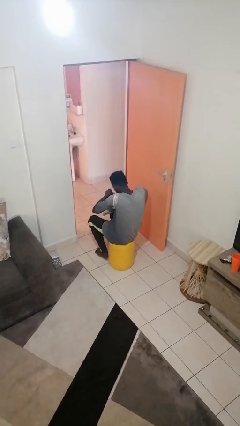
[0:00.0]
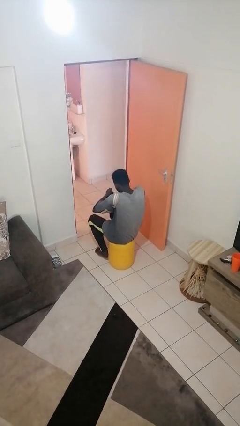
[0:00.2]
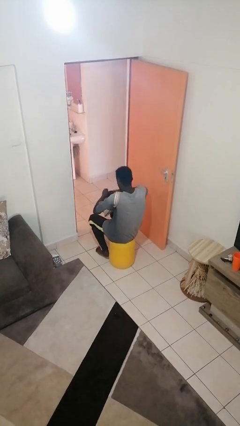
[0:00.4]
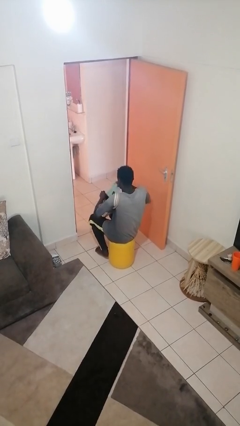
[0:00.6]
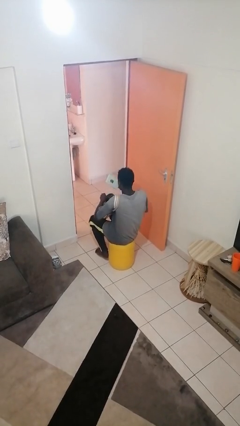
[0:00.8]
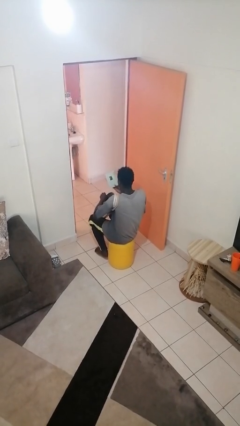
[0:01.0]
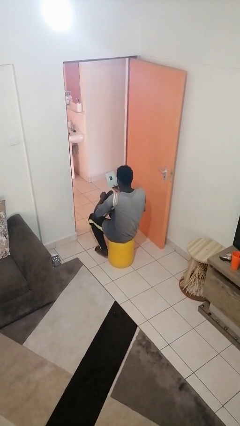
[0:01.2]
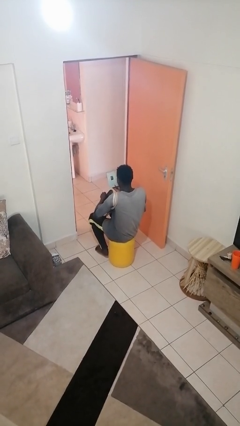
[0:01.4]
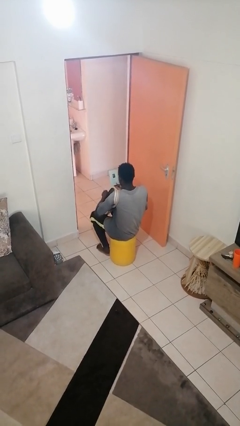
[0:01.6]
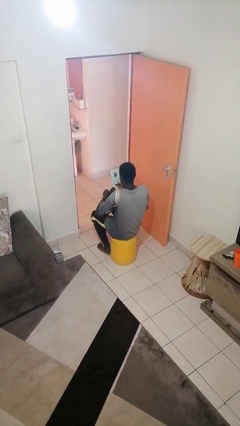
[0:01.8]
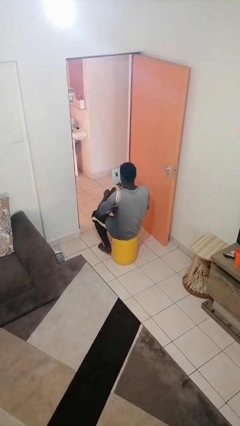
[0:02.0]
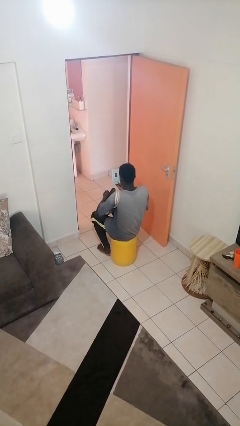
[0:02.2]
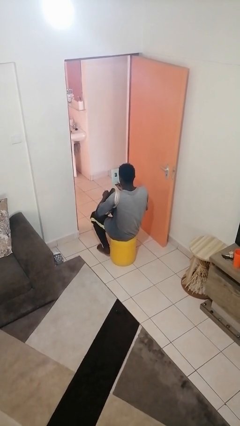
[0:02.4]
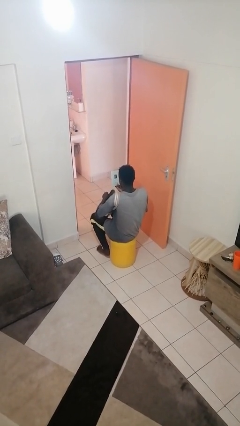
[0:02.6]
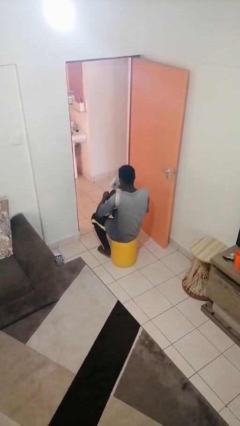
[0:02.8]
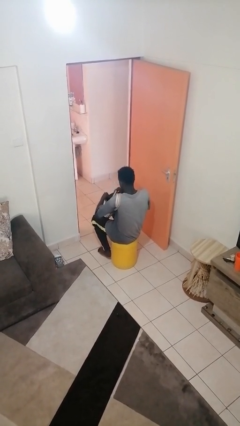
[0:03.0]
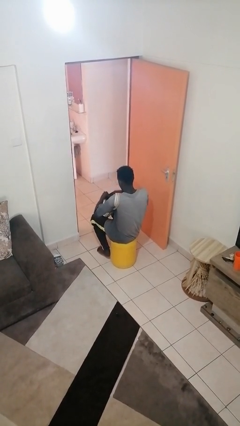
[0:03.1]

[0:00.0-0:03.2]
person takes object from purse

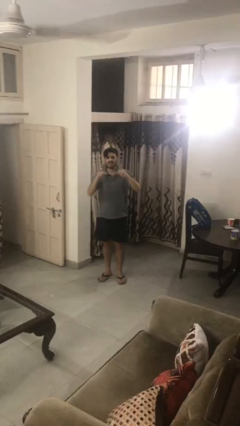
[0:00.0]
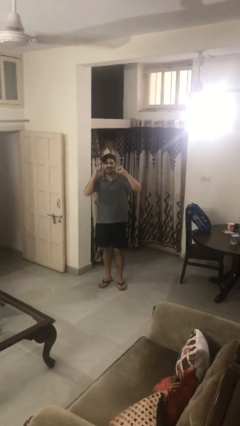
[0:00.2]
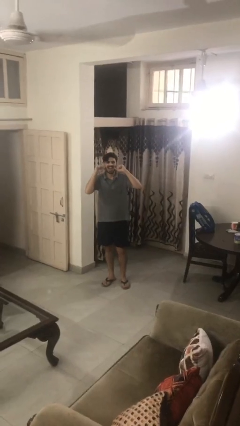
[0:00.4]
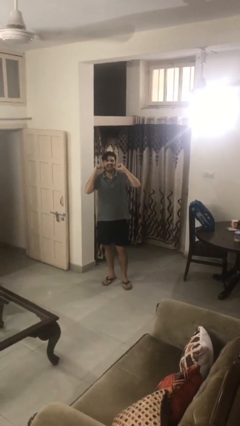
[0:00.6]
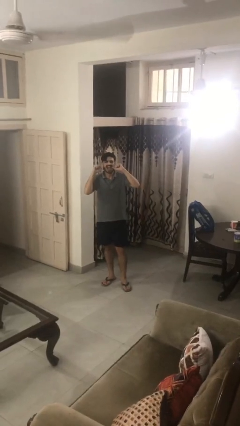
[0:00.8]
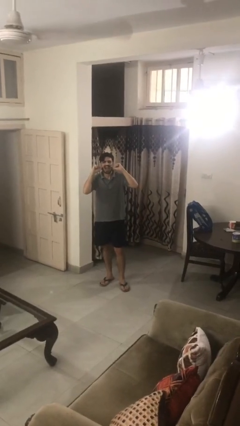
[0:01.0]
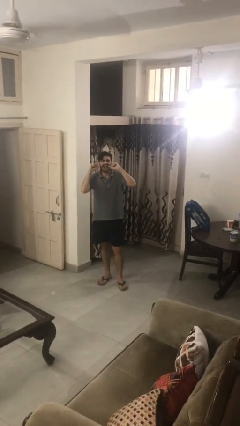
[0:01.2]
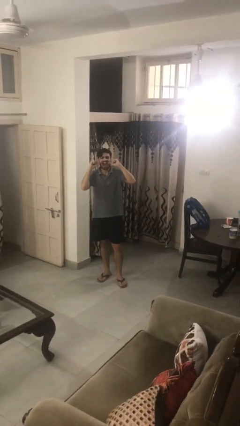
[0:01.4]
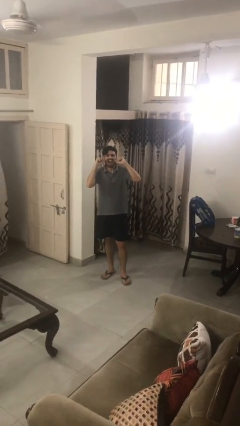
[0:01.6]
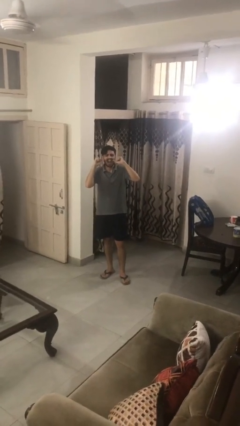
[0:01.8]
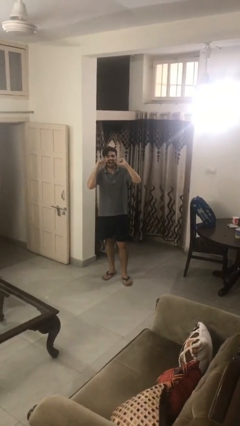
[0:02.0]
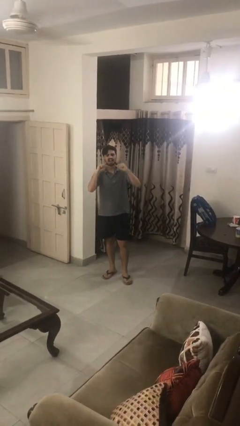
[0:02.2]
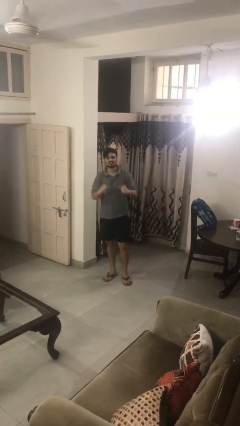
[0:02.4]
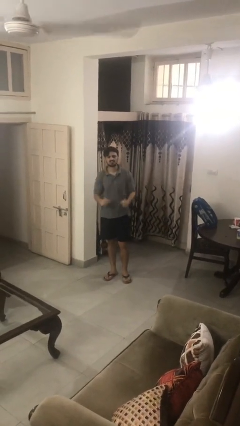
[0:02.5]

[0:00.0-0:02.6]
person flosses

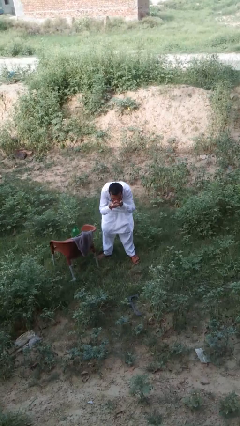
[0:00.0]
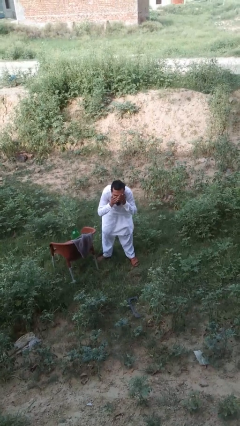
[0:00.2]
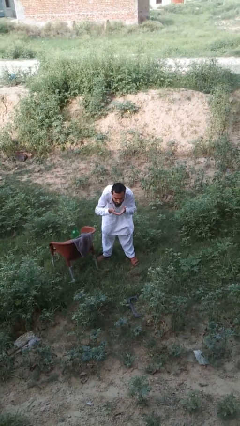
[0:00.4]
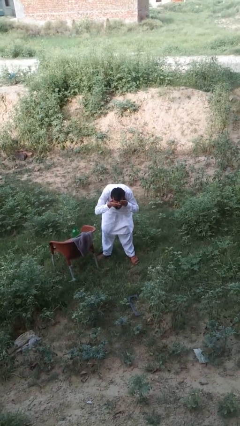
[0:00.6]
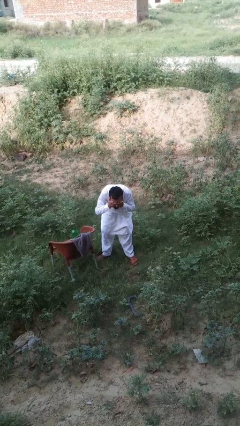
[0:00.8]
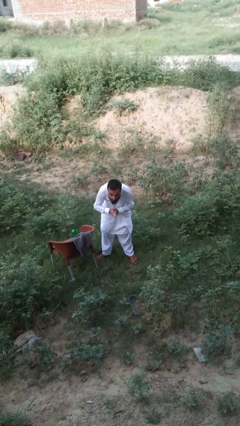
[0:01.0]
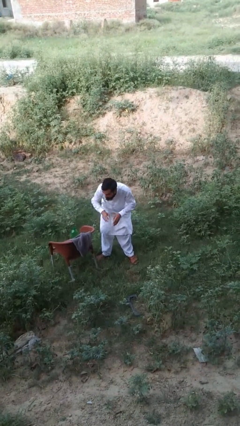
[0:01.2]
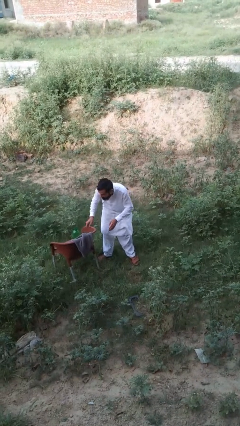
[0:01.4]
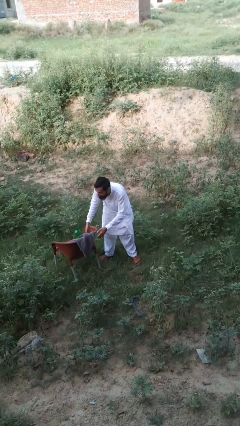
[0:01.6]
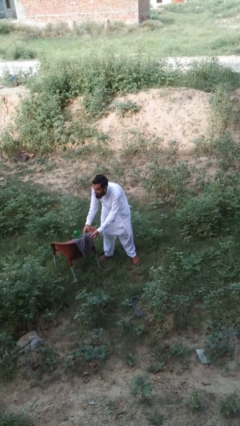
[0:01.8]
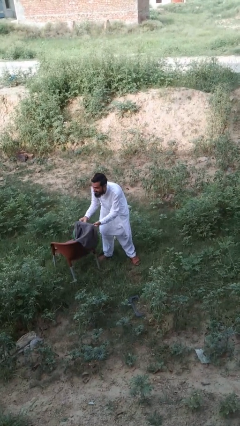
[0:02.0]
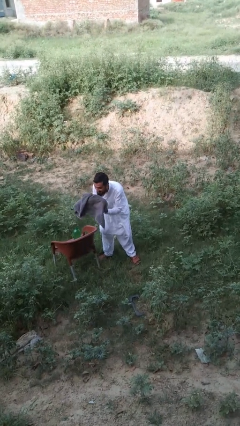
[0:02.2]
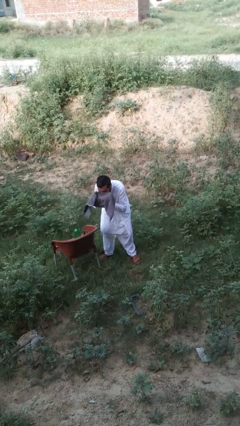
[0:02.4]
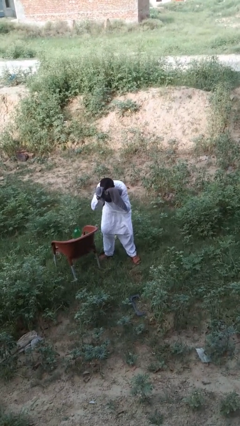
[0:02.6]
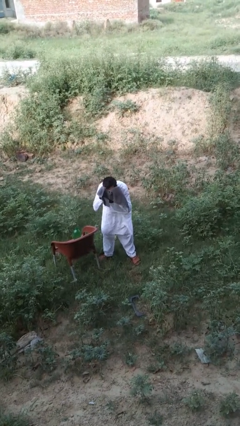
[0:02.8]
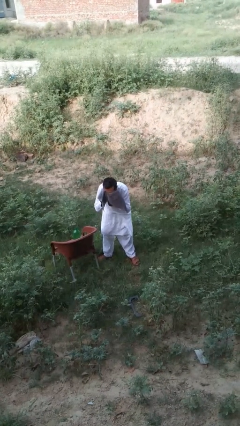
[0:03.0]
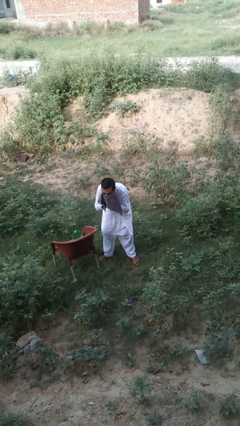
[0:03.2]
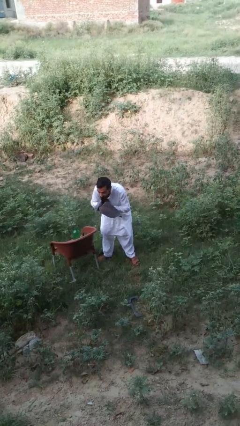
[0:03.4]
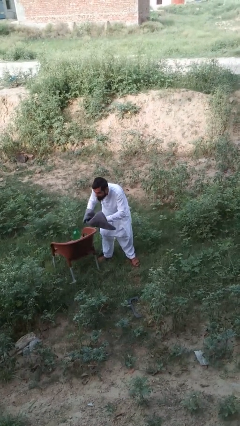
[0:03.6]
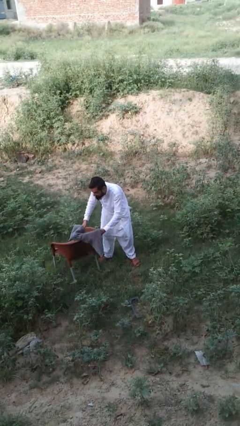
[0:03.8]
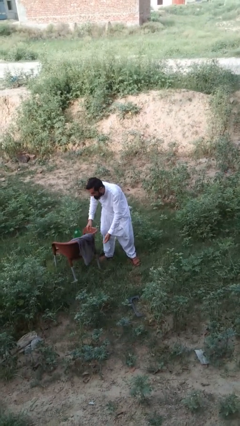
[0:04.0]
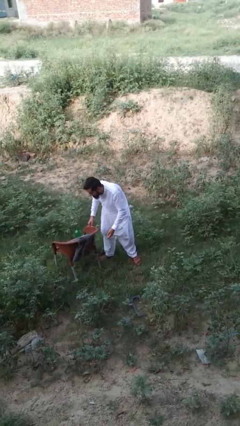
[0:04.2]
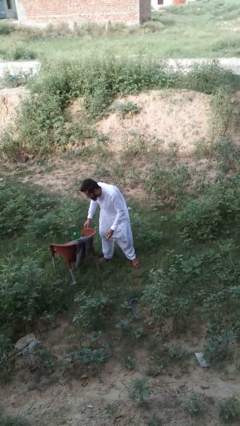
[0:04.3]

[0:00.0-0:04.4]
person dries face with towel

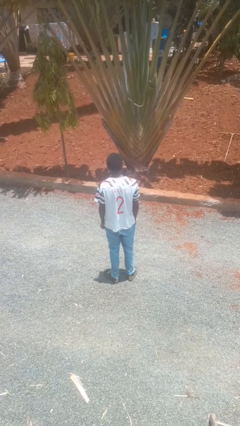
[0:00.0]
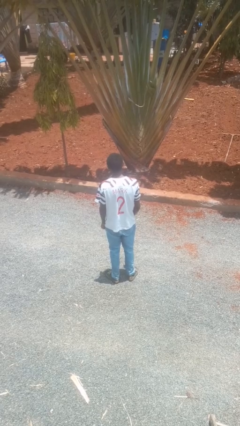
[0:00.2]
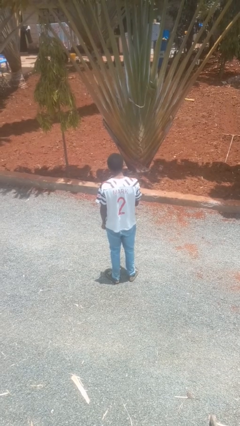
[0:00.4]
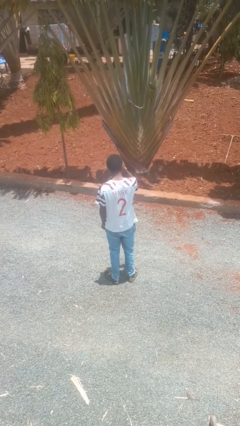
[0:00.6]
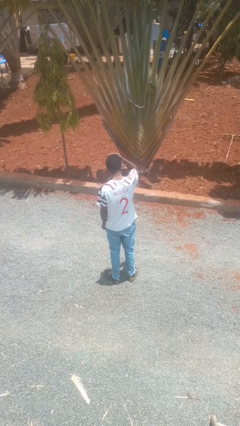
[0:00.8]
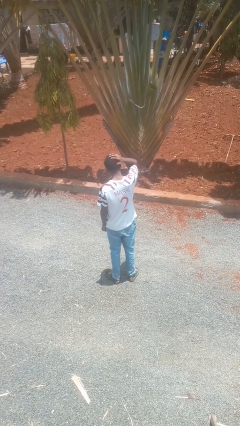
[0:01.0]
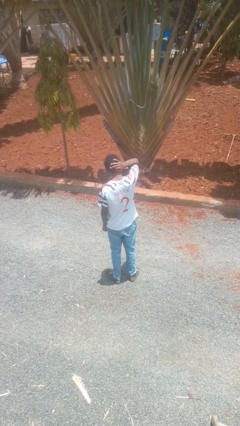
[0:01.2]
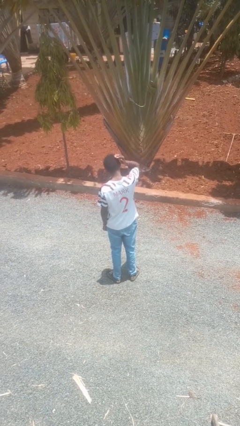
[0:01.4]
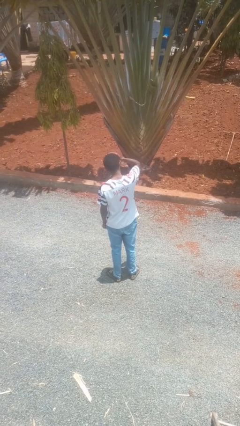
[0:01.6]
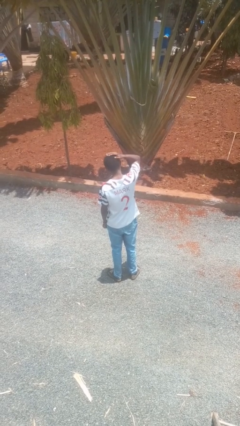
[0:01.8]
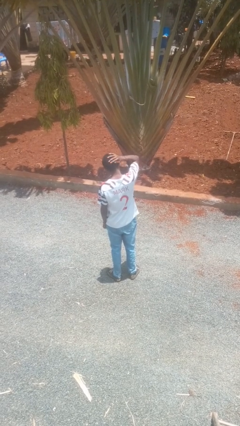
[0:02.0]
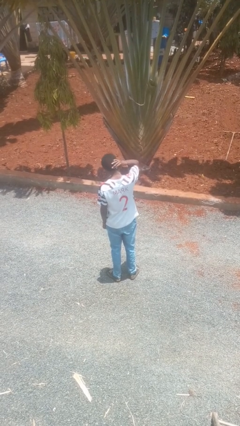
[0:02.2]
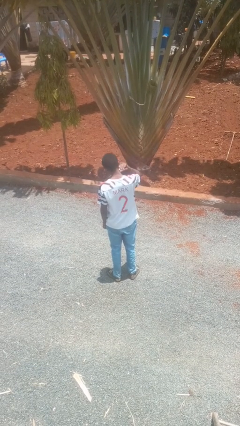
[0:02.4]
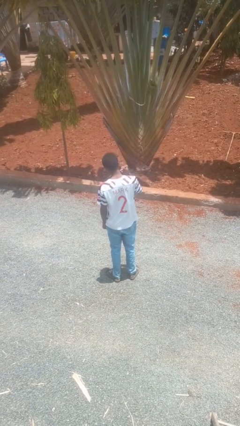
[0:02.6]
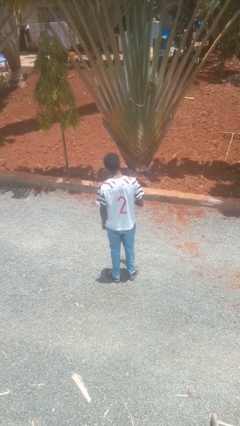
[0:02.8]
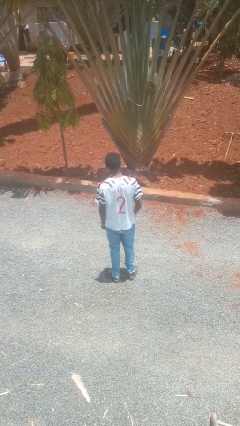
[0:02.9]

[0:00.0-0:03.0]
person strokes hair

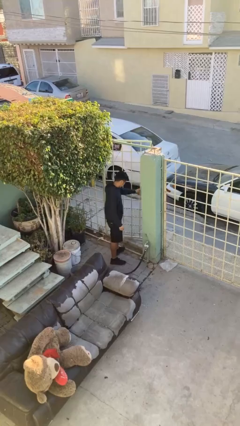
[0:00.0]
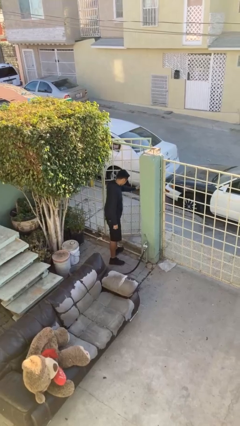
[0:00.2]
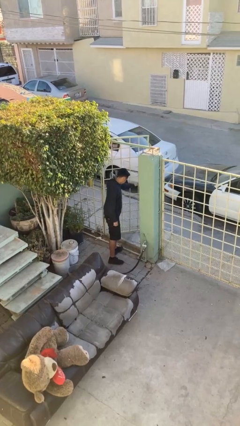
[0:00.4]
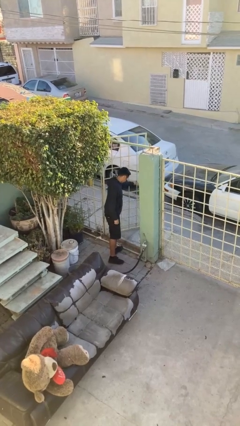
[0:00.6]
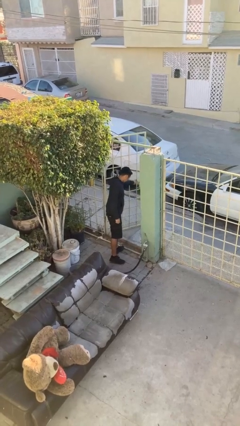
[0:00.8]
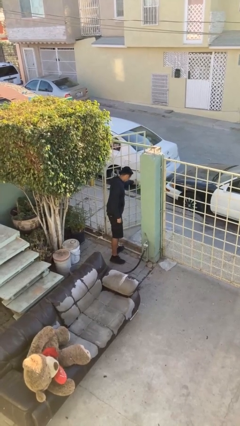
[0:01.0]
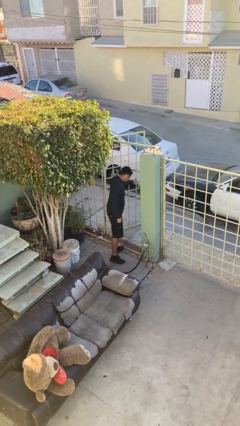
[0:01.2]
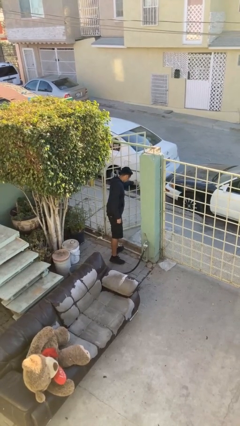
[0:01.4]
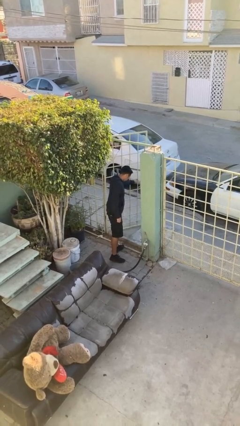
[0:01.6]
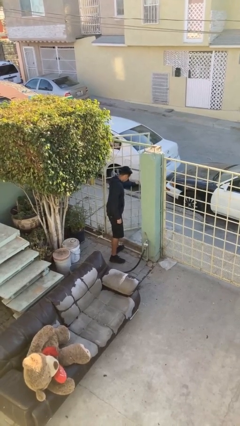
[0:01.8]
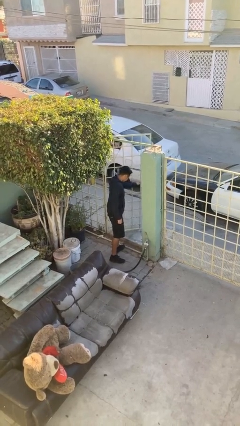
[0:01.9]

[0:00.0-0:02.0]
person opens facility door

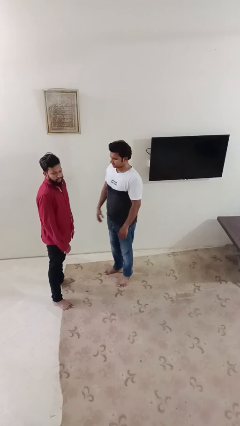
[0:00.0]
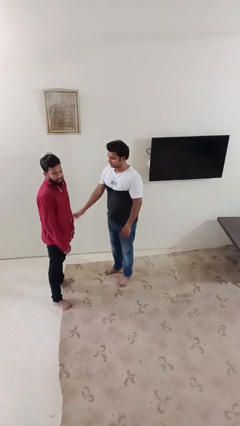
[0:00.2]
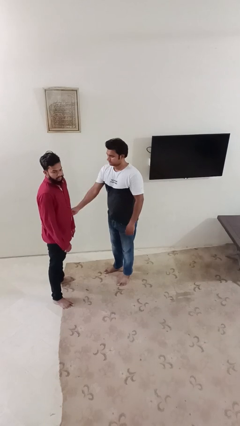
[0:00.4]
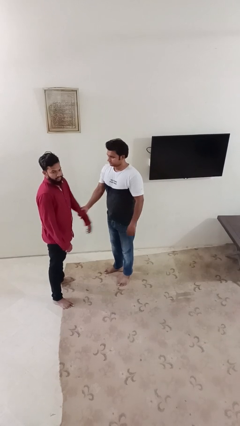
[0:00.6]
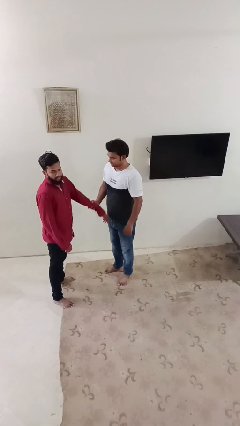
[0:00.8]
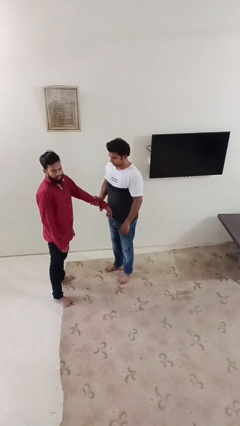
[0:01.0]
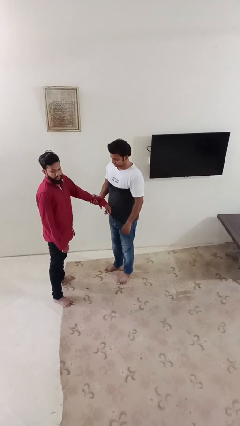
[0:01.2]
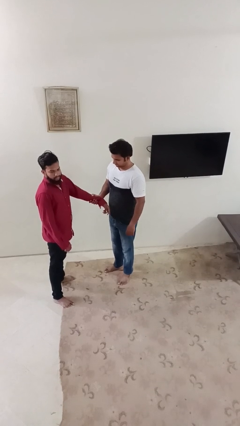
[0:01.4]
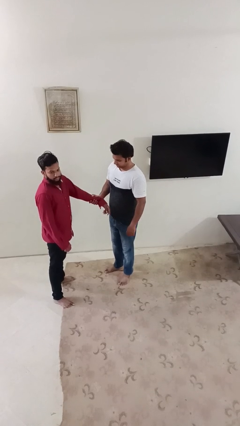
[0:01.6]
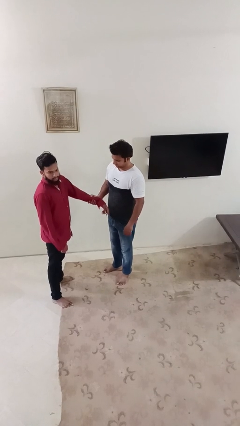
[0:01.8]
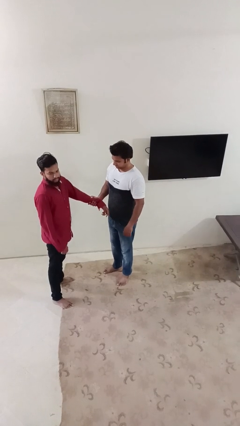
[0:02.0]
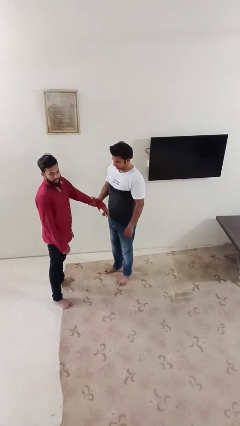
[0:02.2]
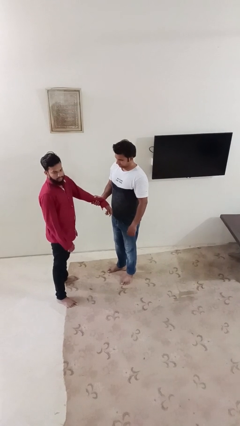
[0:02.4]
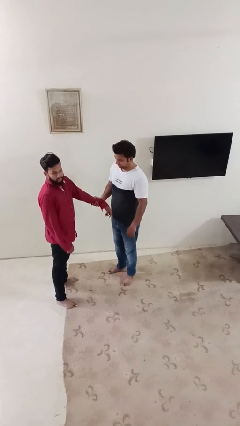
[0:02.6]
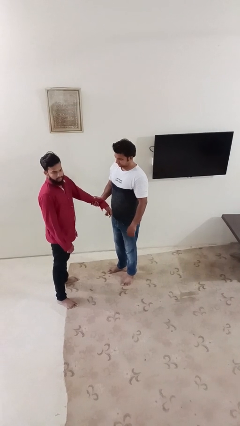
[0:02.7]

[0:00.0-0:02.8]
person grabs person by forearm
